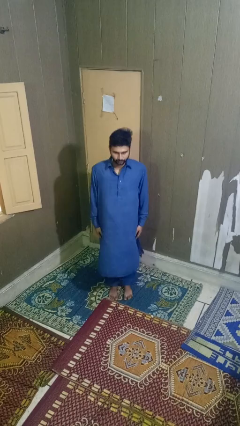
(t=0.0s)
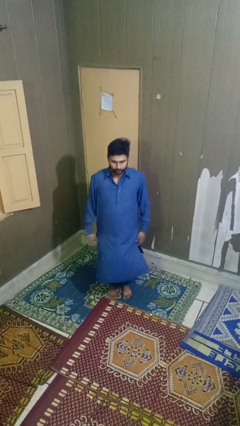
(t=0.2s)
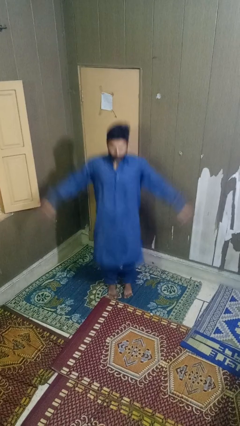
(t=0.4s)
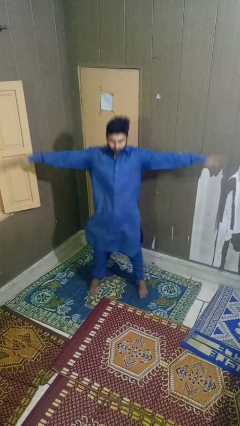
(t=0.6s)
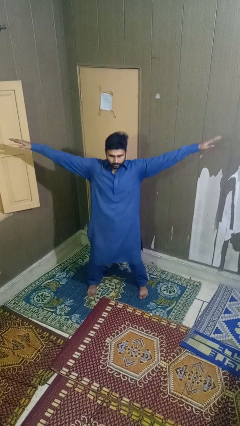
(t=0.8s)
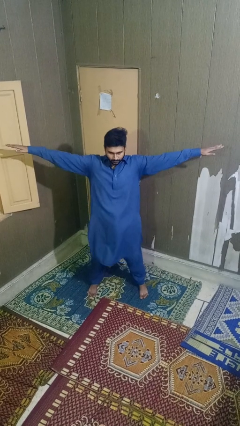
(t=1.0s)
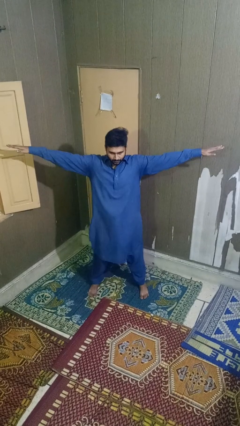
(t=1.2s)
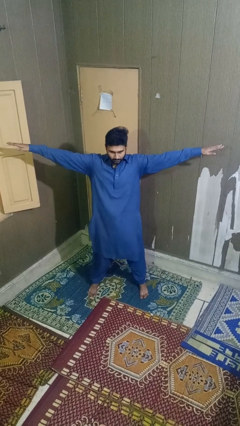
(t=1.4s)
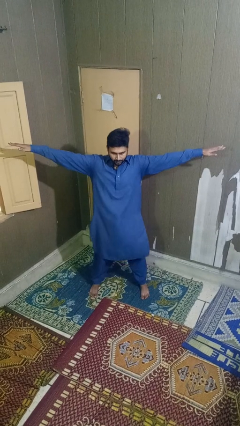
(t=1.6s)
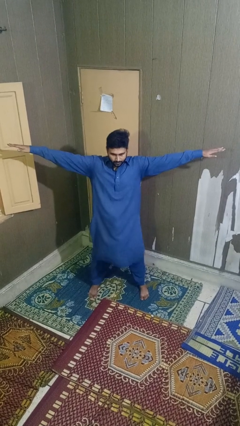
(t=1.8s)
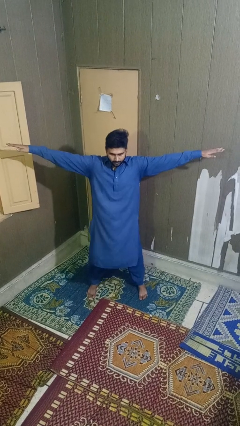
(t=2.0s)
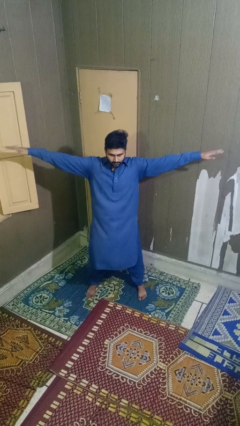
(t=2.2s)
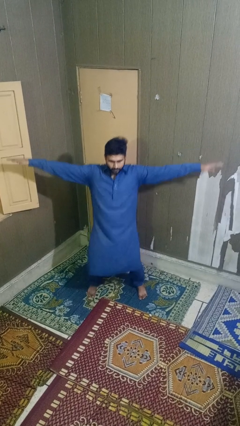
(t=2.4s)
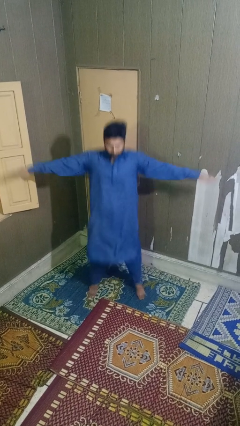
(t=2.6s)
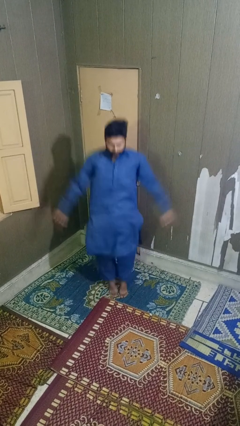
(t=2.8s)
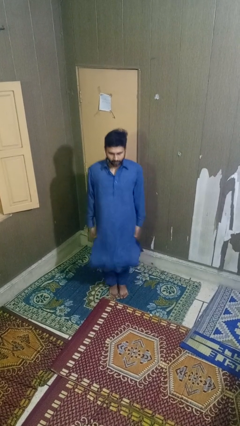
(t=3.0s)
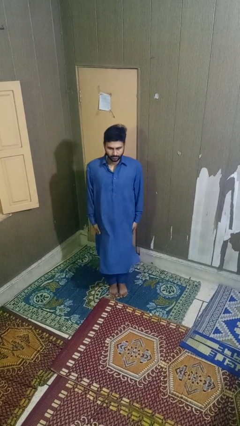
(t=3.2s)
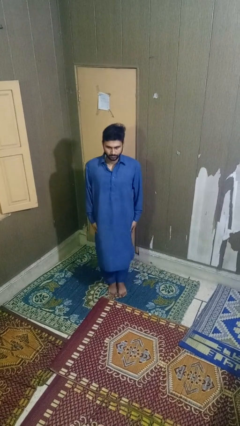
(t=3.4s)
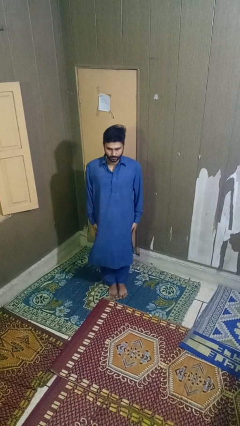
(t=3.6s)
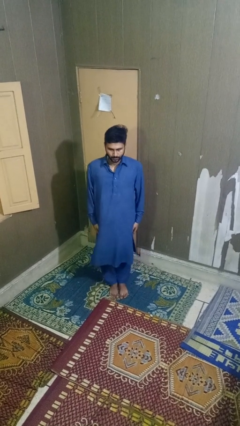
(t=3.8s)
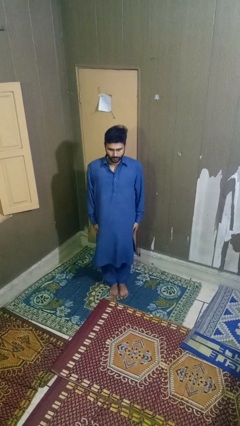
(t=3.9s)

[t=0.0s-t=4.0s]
person exercises with jumping jacks

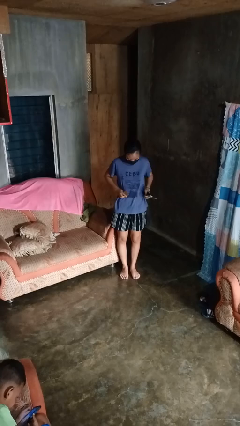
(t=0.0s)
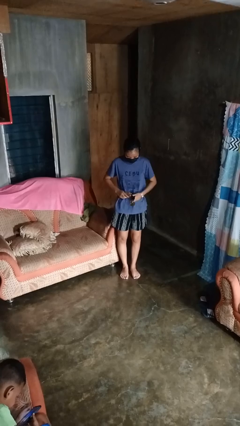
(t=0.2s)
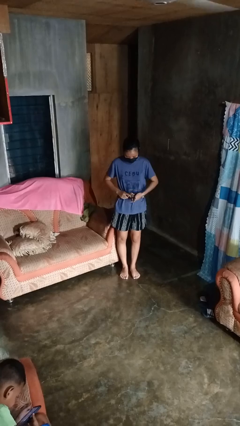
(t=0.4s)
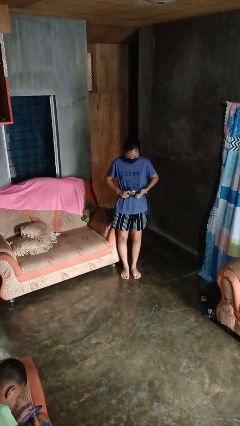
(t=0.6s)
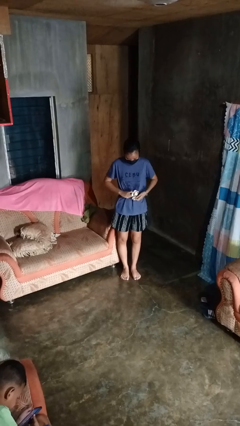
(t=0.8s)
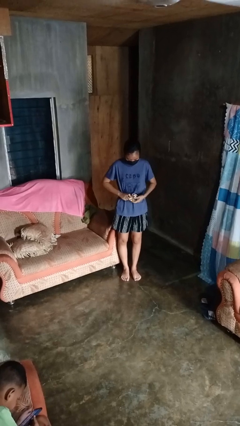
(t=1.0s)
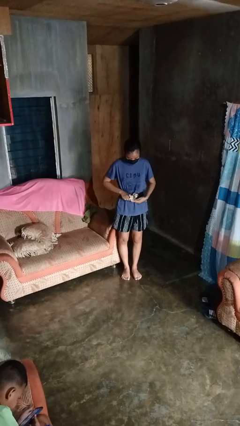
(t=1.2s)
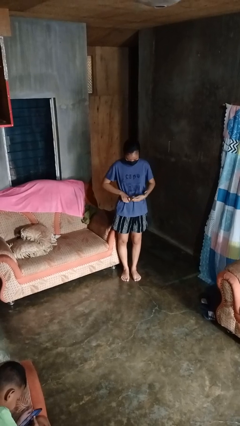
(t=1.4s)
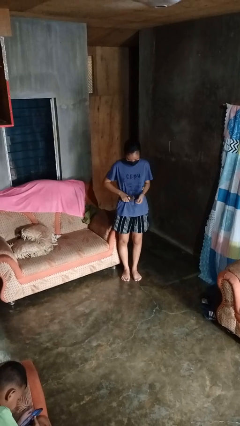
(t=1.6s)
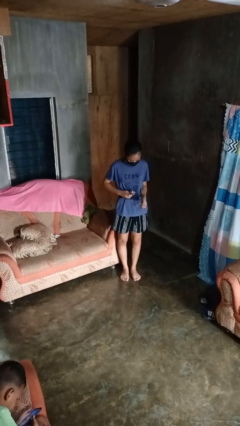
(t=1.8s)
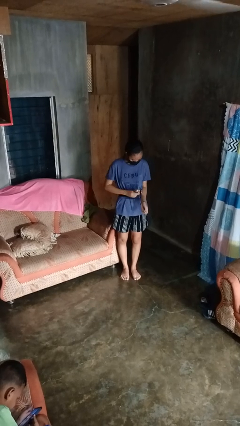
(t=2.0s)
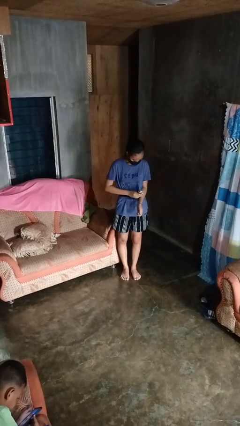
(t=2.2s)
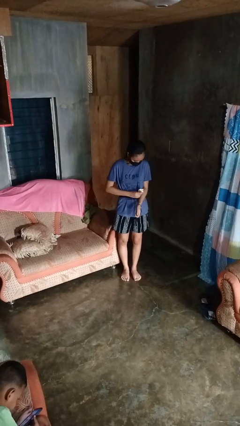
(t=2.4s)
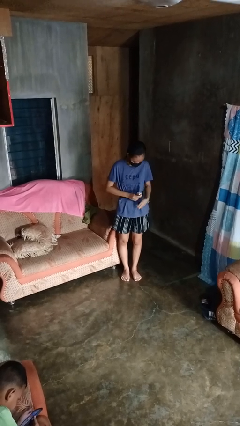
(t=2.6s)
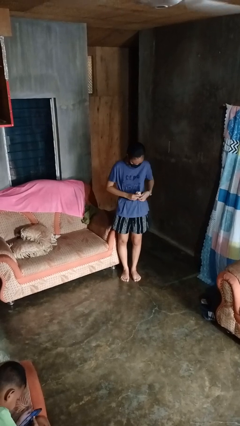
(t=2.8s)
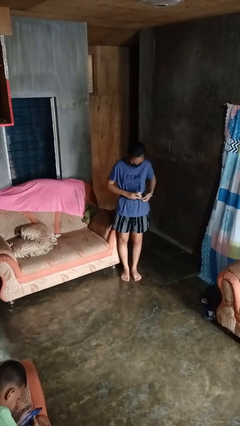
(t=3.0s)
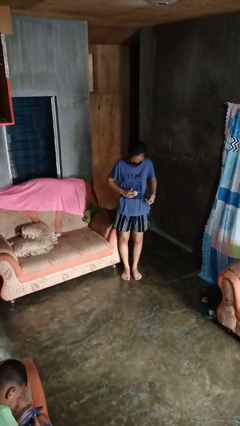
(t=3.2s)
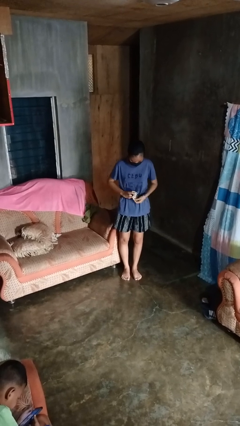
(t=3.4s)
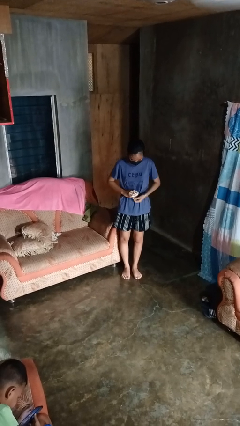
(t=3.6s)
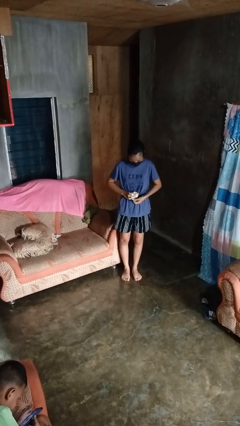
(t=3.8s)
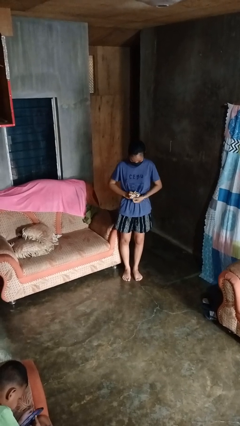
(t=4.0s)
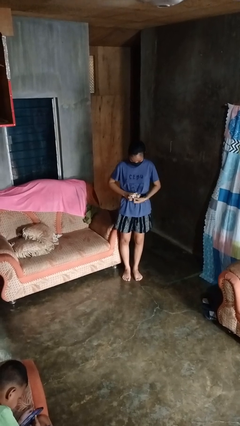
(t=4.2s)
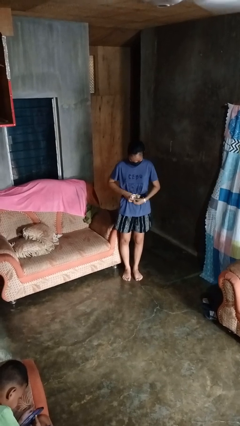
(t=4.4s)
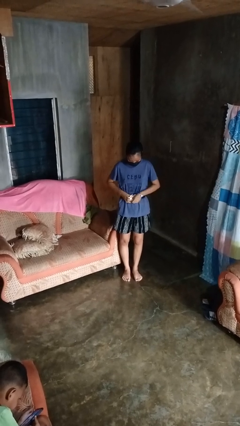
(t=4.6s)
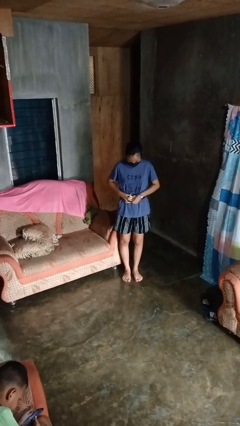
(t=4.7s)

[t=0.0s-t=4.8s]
person puts on belt

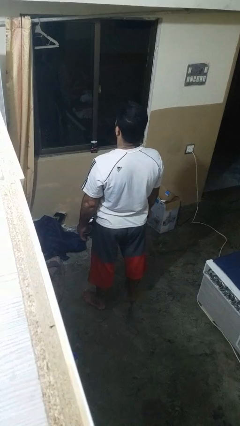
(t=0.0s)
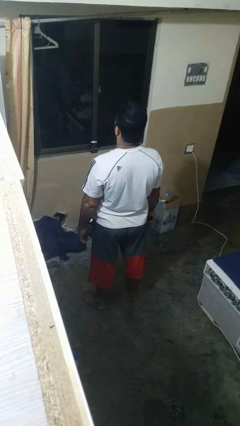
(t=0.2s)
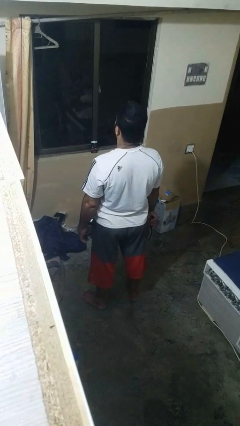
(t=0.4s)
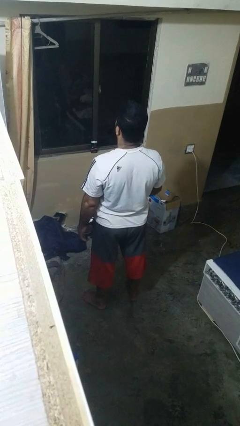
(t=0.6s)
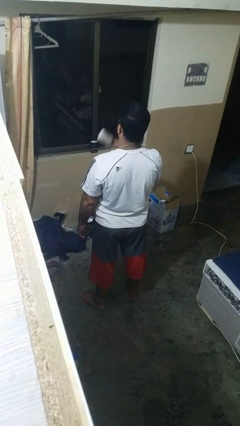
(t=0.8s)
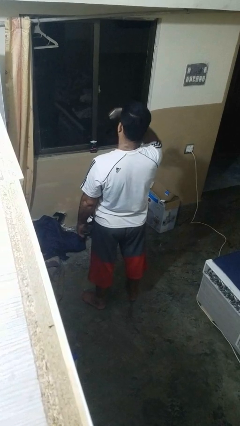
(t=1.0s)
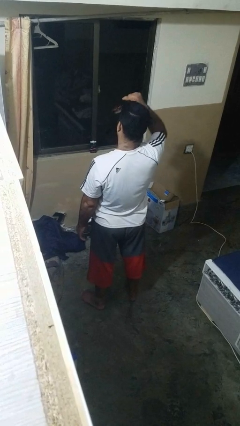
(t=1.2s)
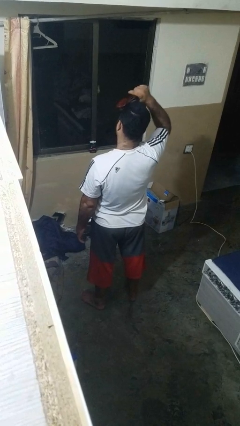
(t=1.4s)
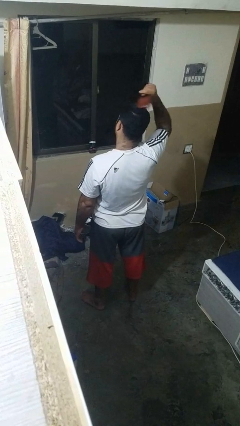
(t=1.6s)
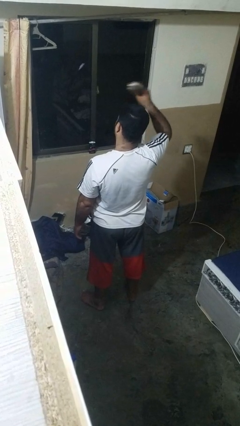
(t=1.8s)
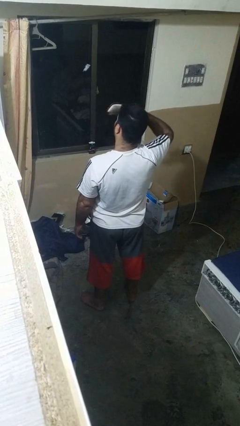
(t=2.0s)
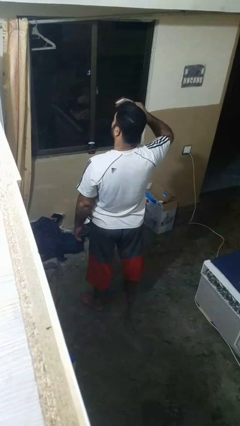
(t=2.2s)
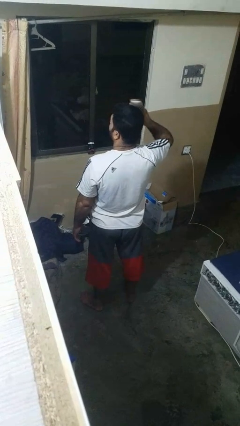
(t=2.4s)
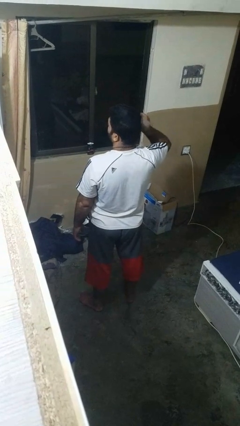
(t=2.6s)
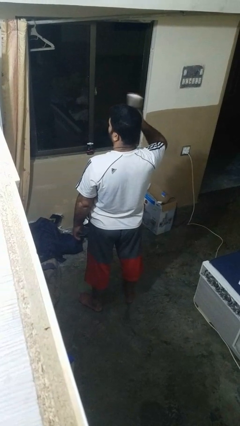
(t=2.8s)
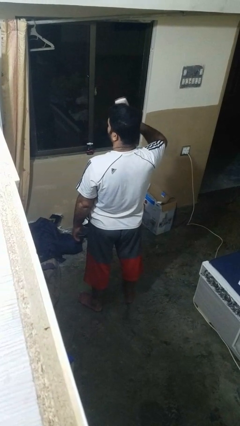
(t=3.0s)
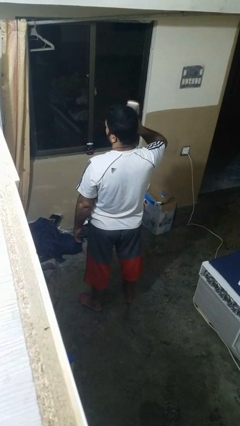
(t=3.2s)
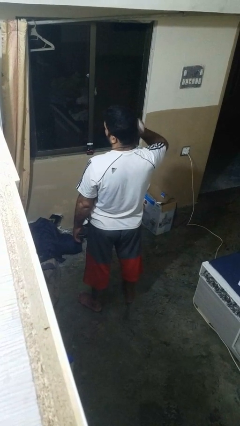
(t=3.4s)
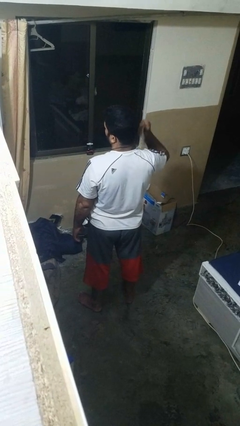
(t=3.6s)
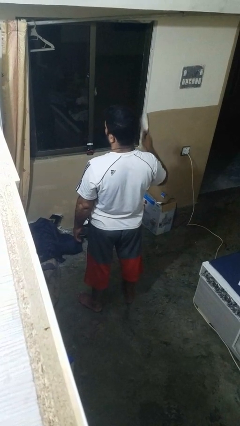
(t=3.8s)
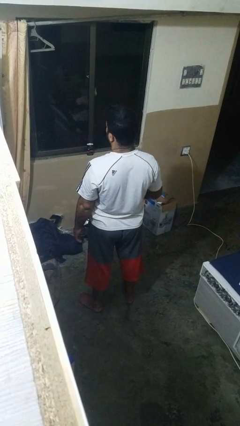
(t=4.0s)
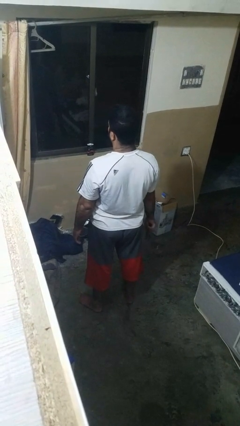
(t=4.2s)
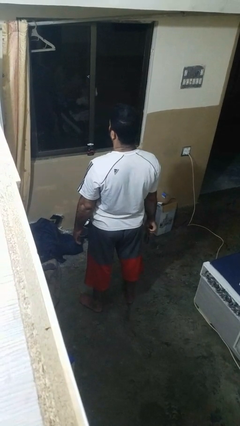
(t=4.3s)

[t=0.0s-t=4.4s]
person brushes hair

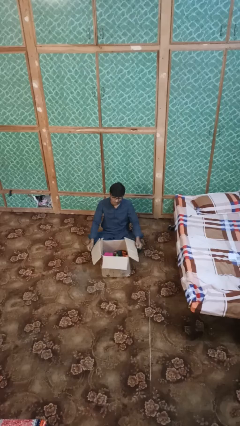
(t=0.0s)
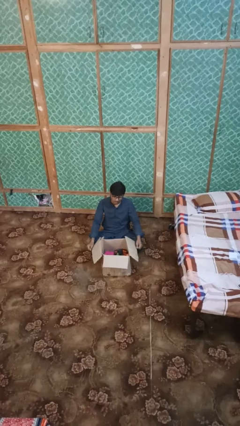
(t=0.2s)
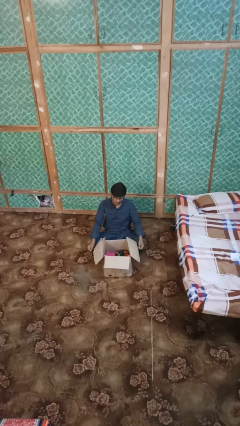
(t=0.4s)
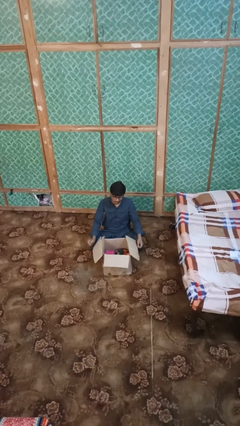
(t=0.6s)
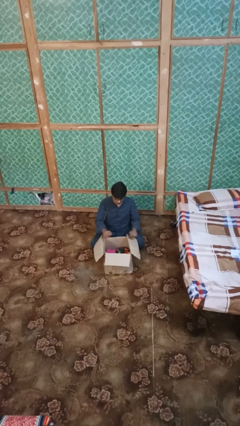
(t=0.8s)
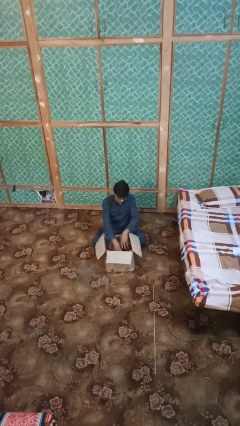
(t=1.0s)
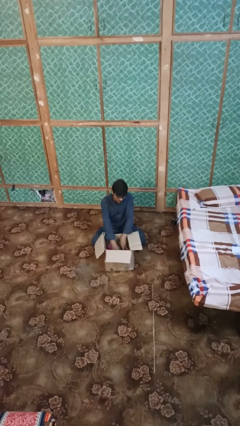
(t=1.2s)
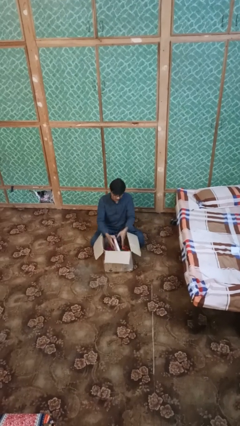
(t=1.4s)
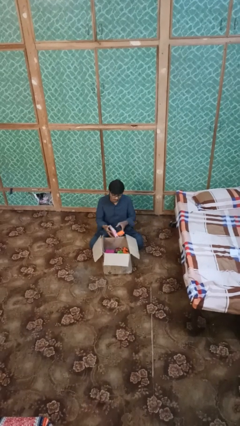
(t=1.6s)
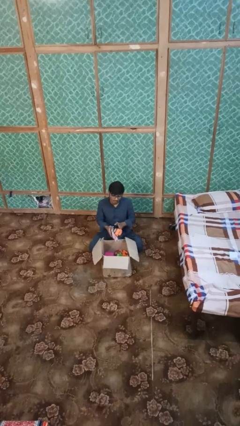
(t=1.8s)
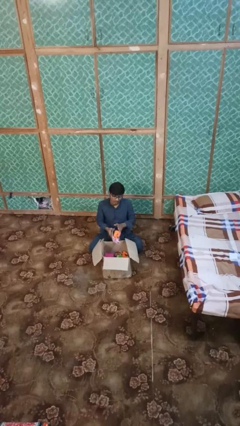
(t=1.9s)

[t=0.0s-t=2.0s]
person takes object from box

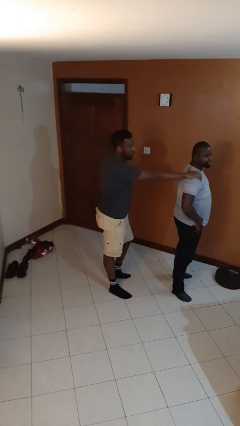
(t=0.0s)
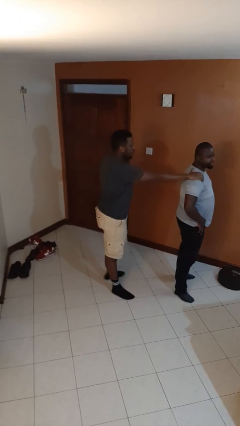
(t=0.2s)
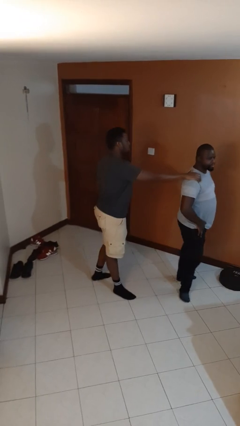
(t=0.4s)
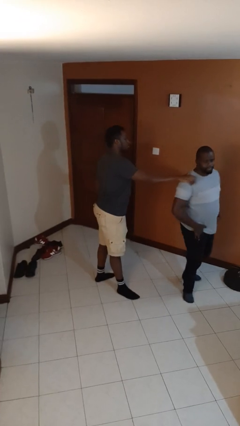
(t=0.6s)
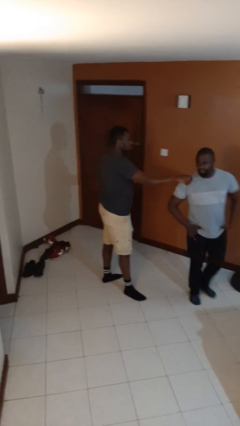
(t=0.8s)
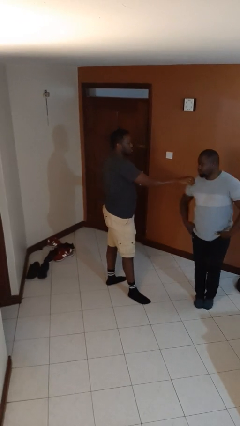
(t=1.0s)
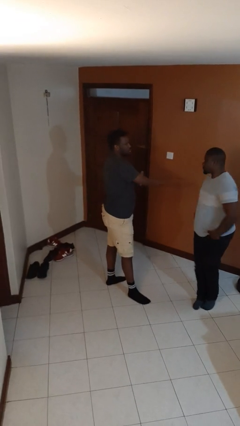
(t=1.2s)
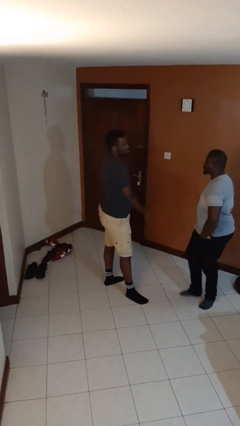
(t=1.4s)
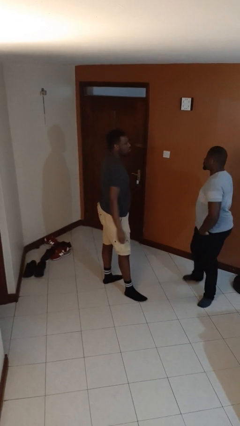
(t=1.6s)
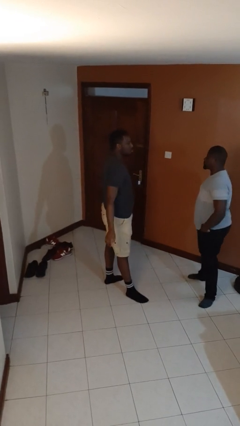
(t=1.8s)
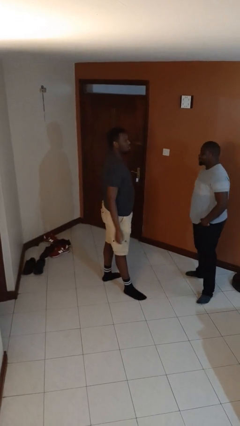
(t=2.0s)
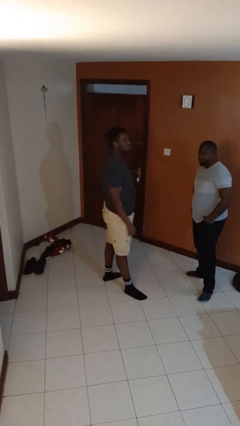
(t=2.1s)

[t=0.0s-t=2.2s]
person spins person around

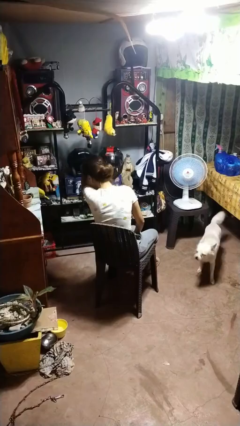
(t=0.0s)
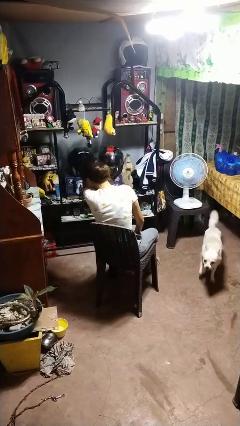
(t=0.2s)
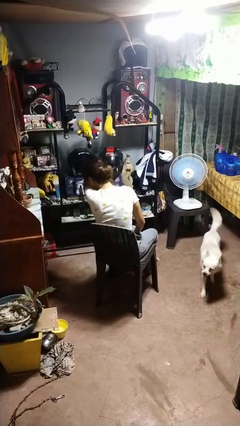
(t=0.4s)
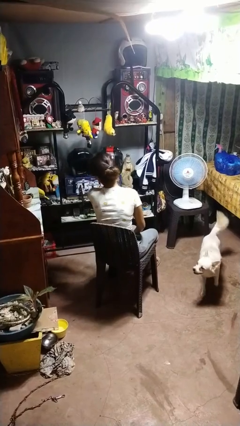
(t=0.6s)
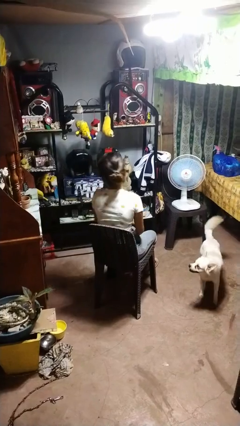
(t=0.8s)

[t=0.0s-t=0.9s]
person sneezes into arm
